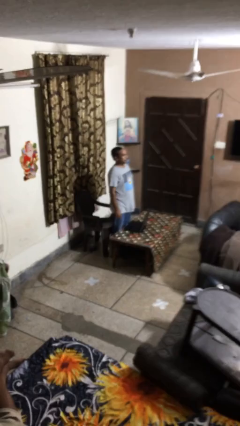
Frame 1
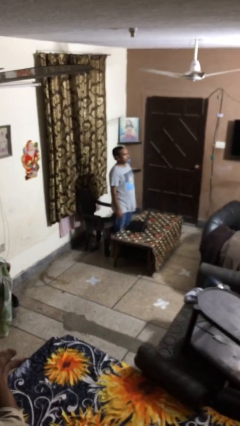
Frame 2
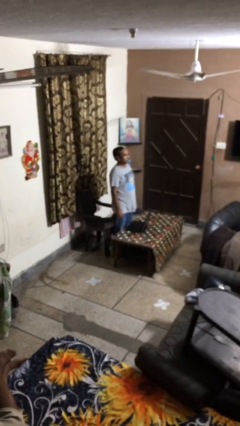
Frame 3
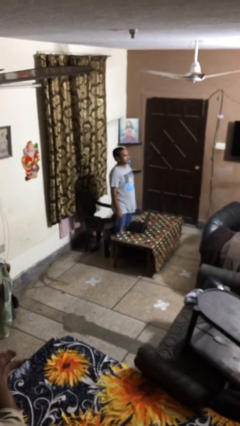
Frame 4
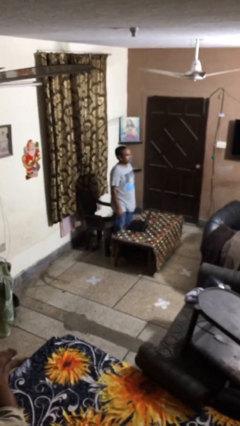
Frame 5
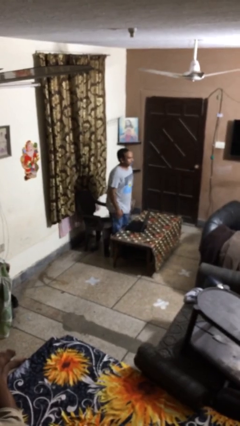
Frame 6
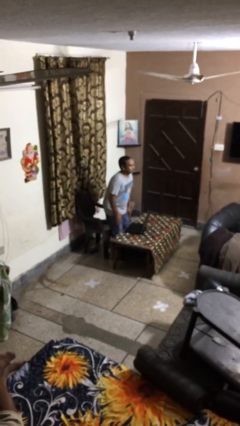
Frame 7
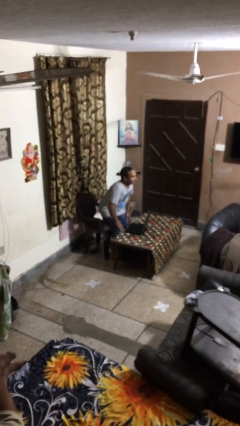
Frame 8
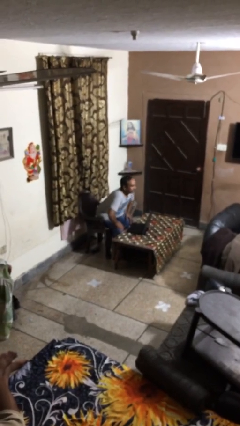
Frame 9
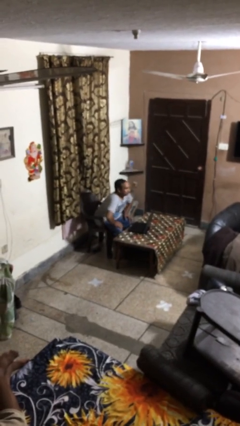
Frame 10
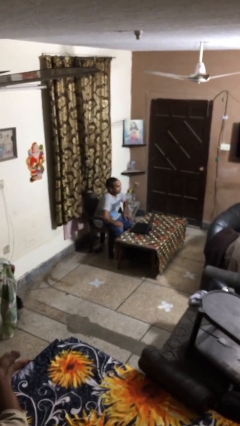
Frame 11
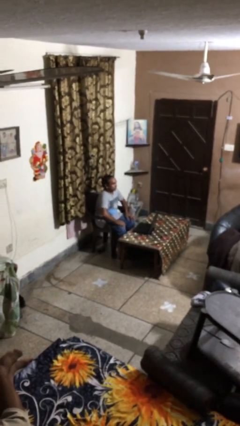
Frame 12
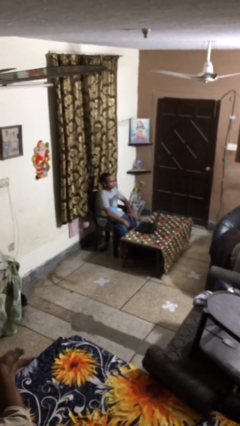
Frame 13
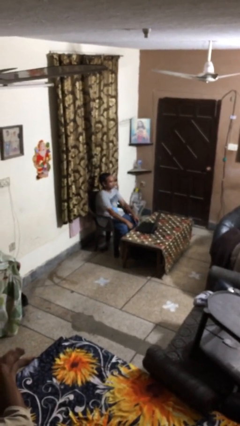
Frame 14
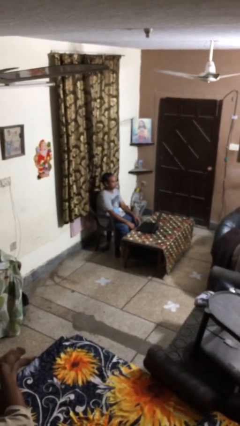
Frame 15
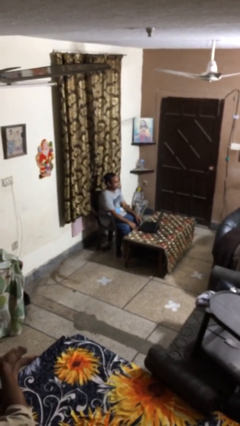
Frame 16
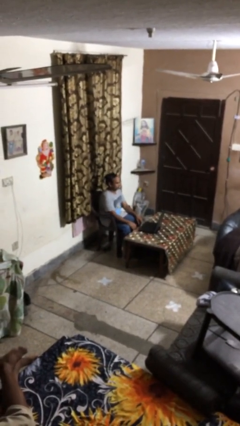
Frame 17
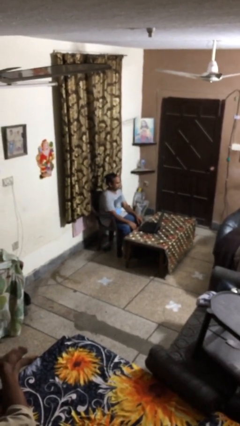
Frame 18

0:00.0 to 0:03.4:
person sits down

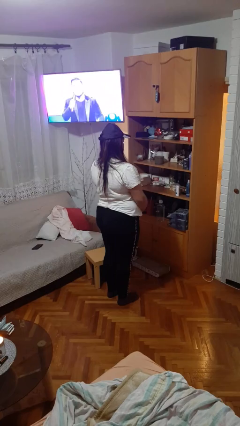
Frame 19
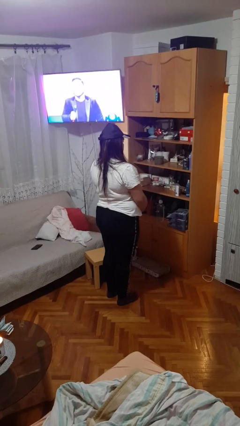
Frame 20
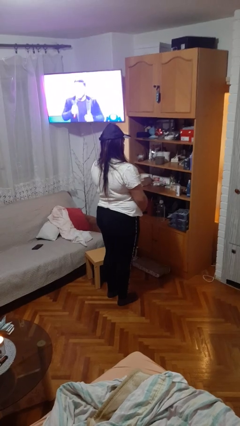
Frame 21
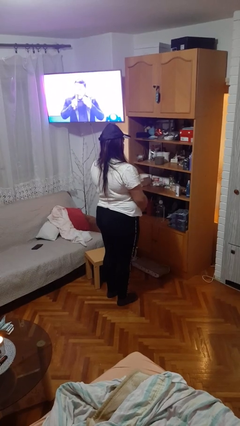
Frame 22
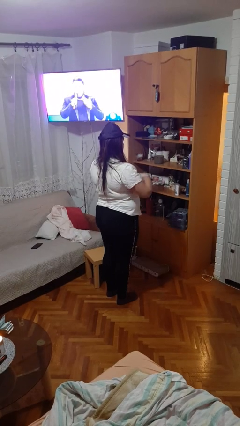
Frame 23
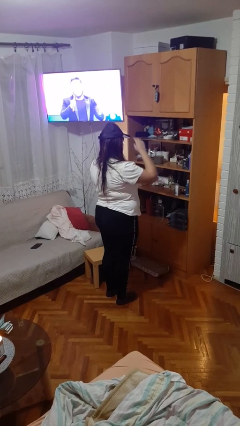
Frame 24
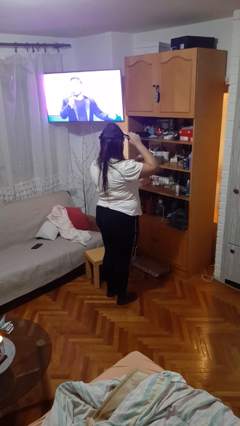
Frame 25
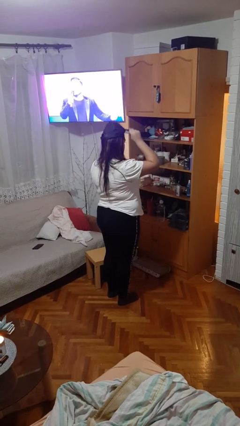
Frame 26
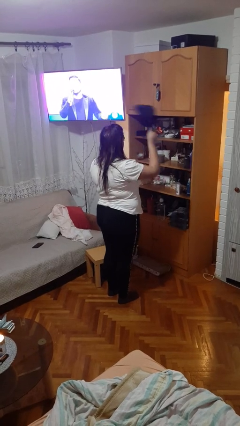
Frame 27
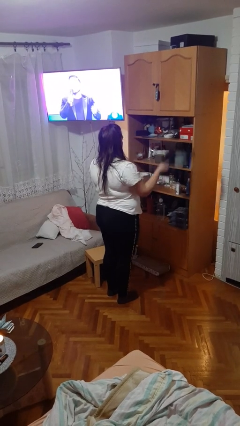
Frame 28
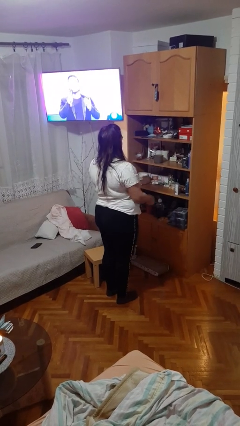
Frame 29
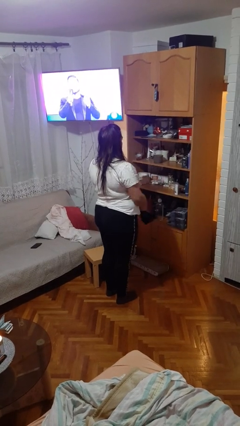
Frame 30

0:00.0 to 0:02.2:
person takes off hat

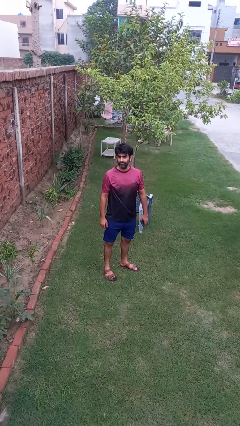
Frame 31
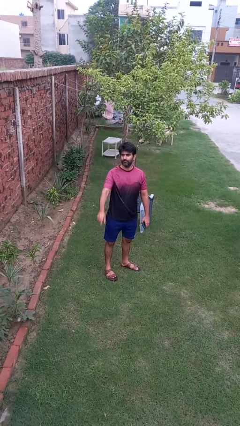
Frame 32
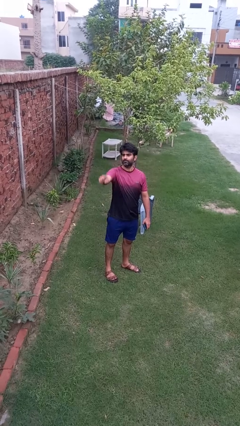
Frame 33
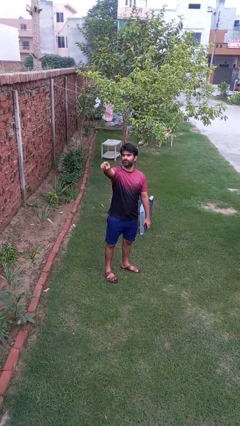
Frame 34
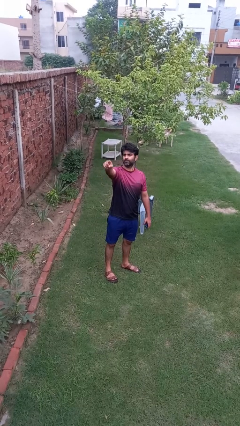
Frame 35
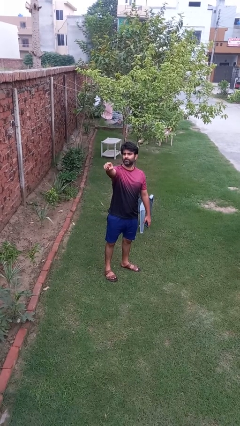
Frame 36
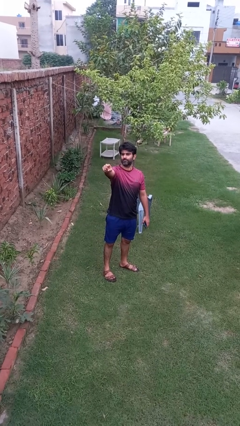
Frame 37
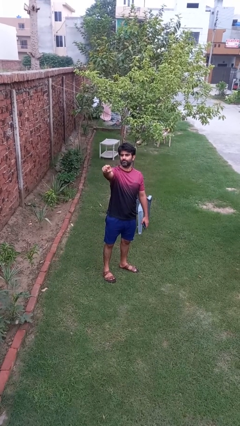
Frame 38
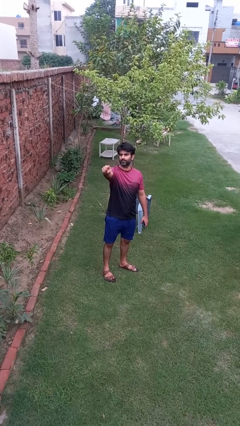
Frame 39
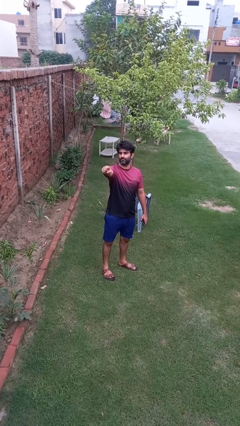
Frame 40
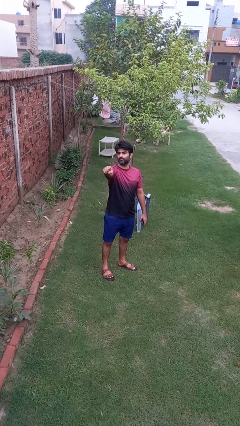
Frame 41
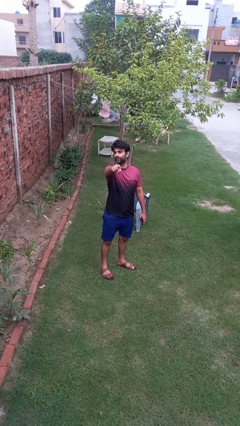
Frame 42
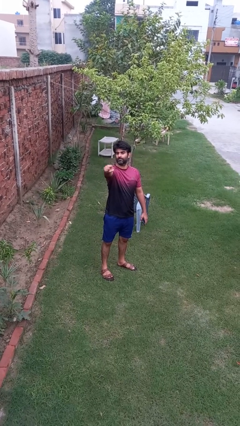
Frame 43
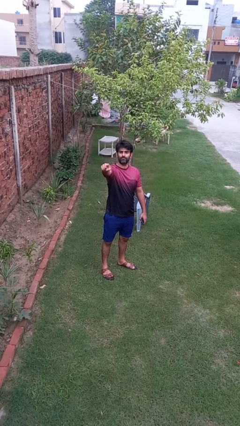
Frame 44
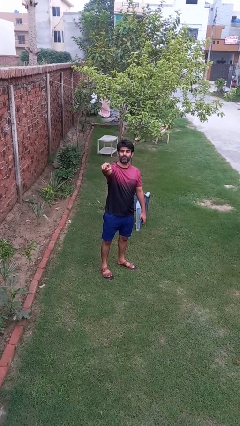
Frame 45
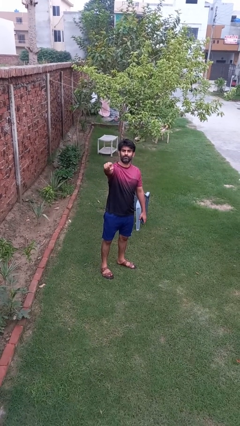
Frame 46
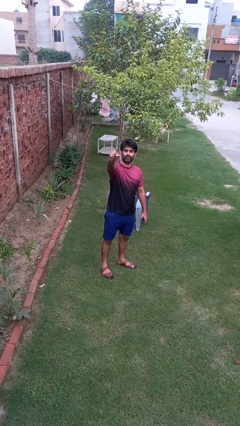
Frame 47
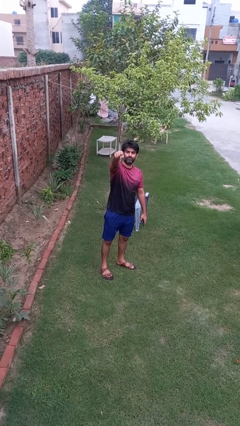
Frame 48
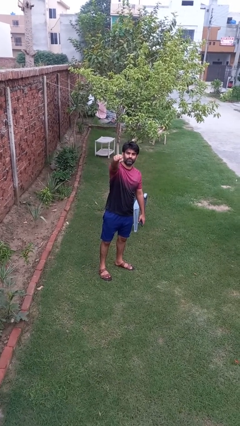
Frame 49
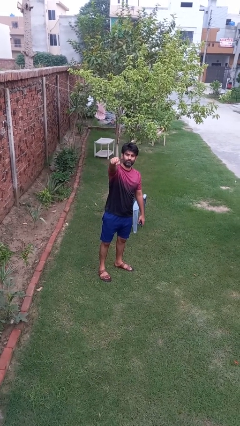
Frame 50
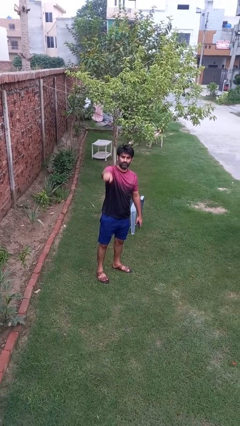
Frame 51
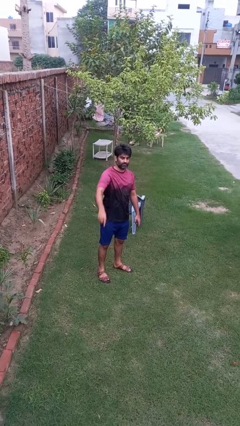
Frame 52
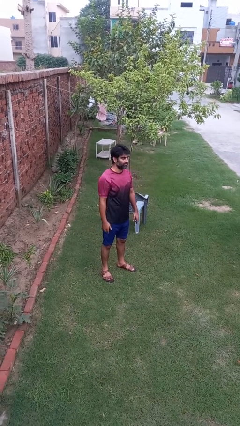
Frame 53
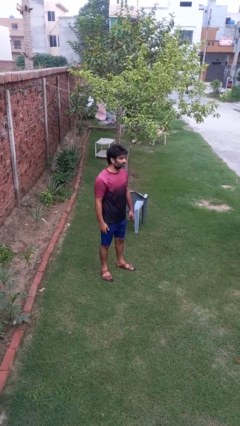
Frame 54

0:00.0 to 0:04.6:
person points at person

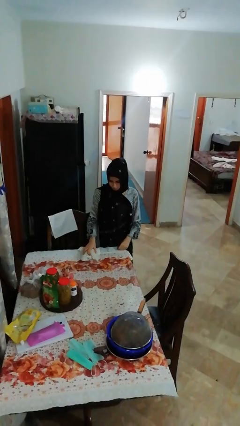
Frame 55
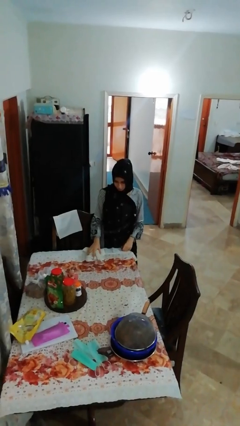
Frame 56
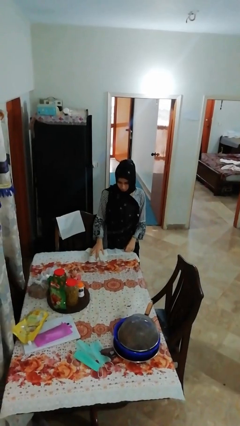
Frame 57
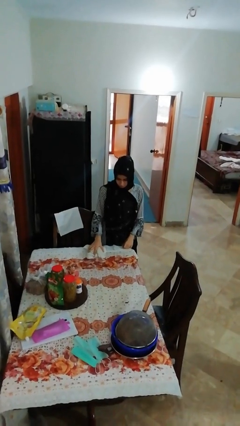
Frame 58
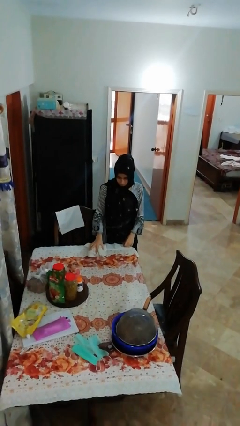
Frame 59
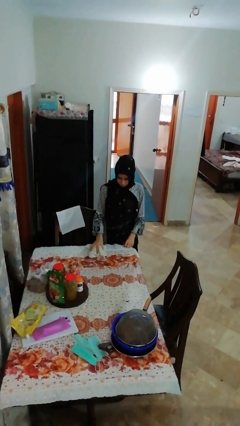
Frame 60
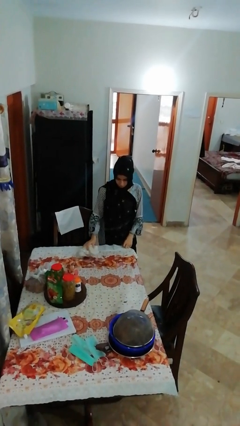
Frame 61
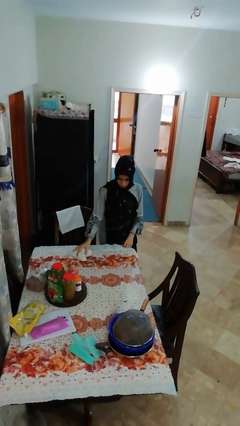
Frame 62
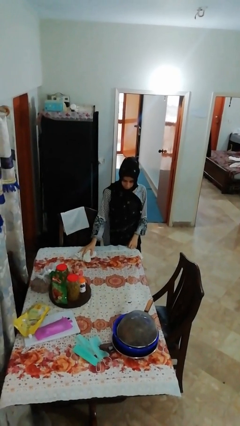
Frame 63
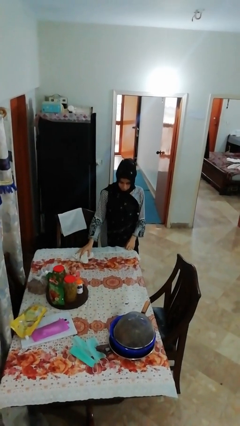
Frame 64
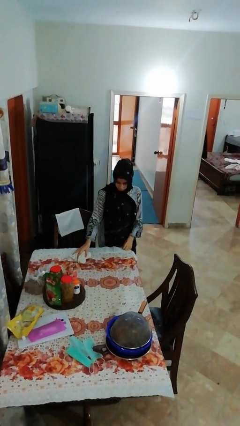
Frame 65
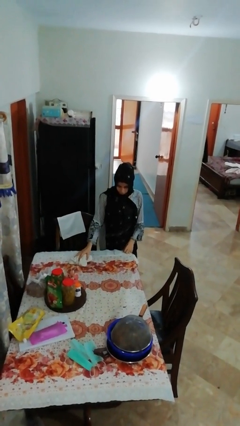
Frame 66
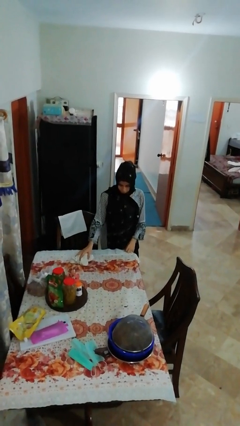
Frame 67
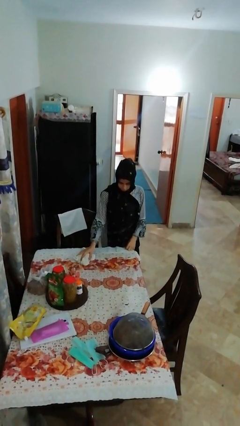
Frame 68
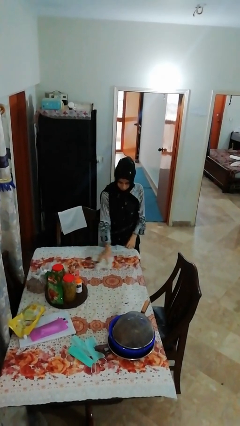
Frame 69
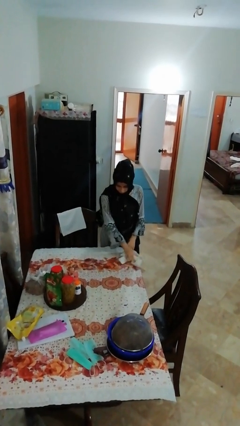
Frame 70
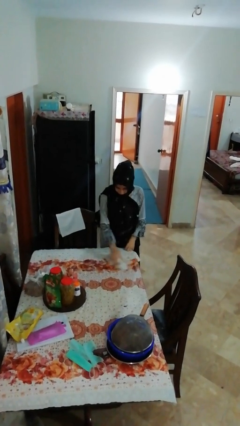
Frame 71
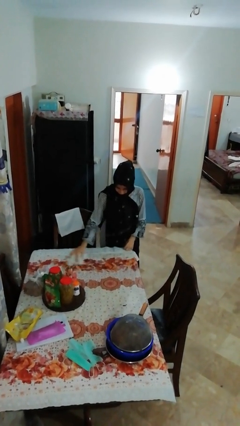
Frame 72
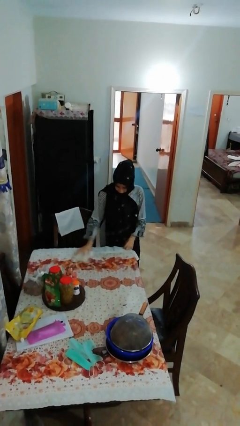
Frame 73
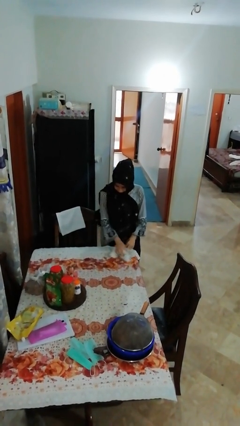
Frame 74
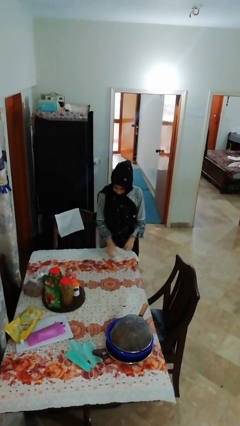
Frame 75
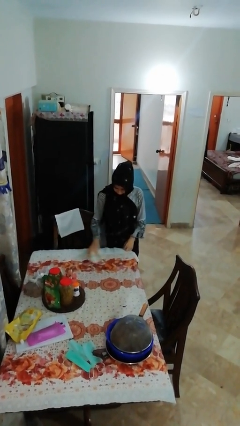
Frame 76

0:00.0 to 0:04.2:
person cleans table with rag

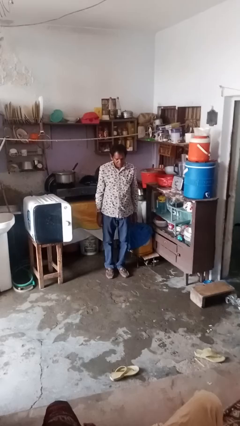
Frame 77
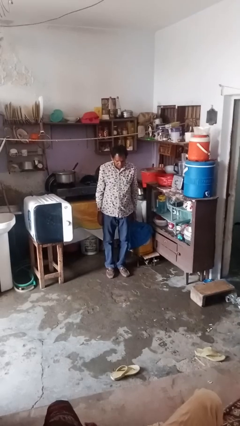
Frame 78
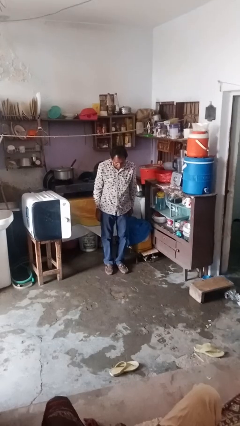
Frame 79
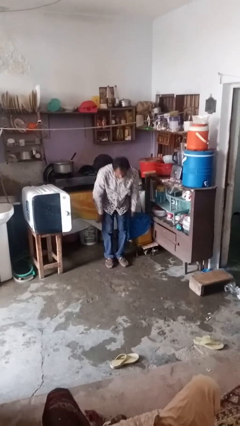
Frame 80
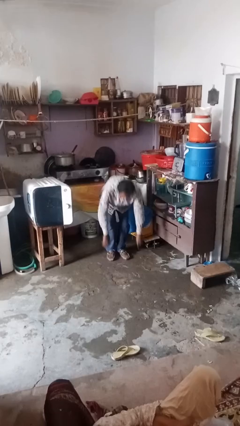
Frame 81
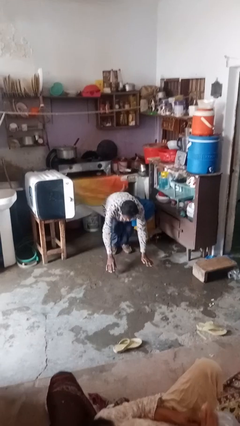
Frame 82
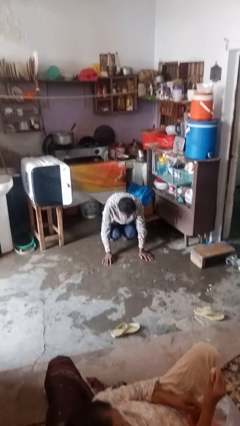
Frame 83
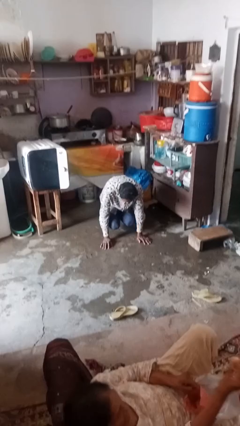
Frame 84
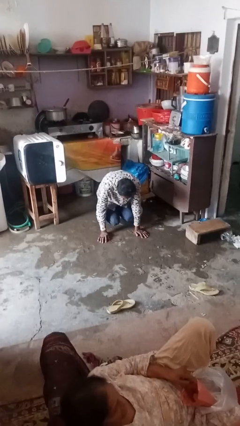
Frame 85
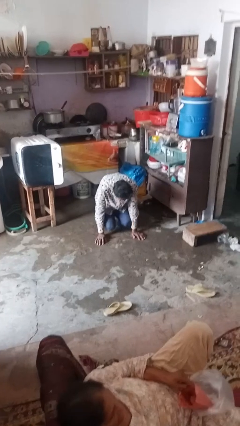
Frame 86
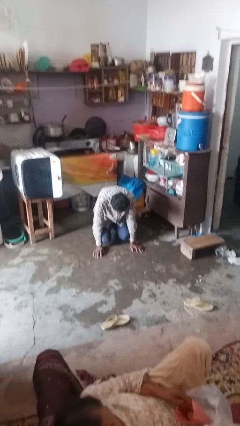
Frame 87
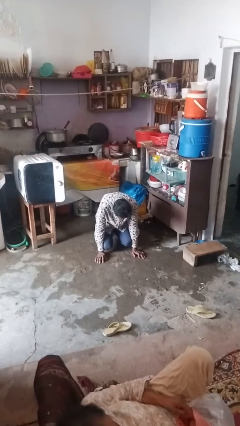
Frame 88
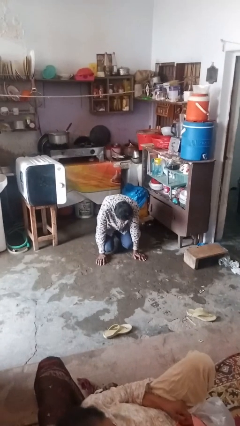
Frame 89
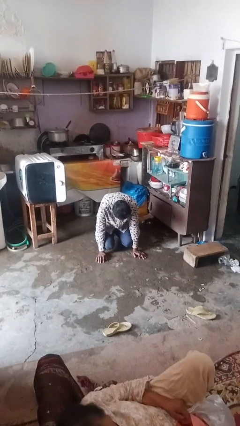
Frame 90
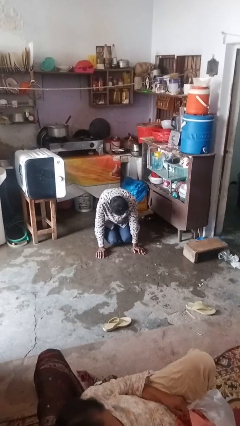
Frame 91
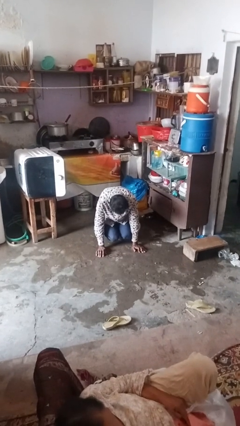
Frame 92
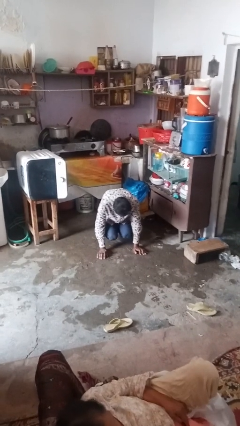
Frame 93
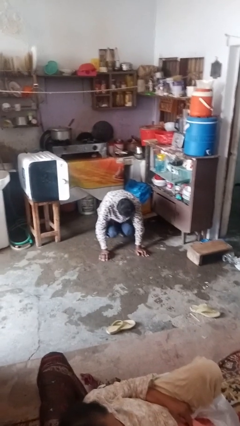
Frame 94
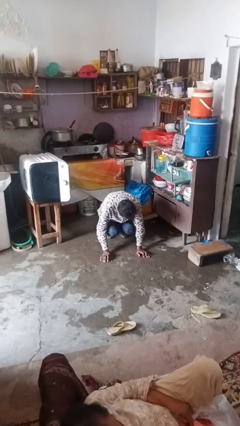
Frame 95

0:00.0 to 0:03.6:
person falls while standing
